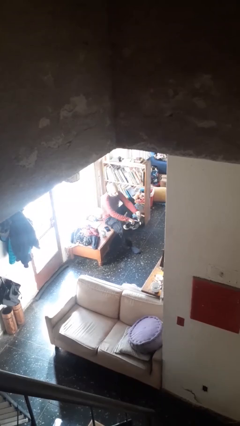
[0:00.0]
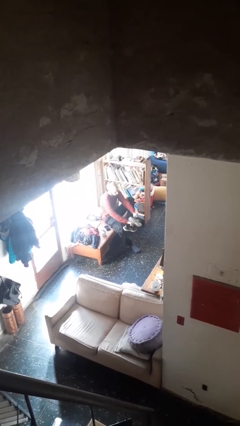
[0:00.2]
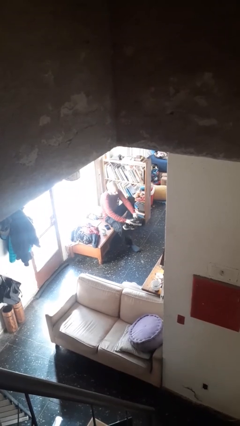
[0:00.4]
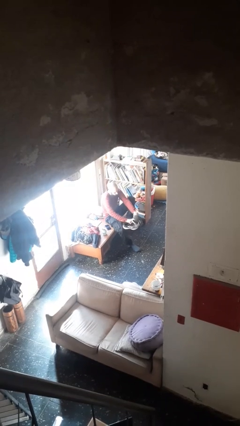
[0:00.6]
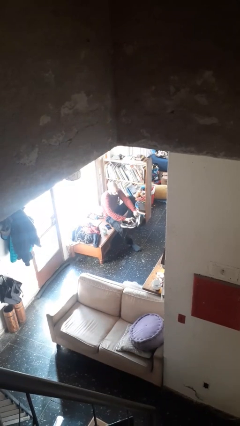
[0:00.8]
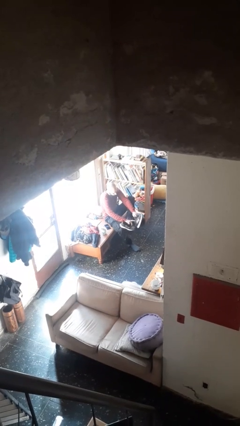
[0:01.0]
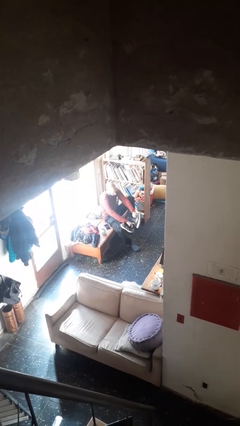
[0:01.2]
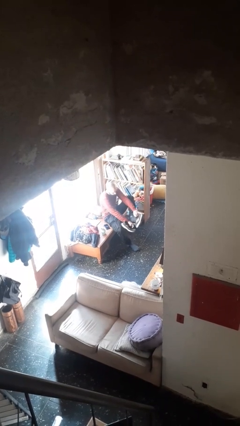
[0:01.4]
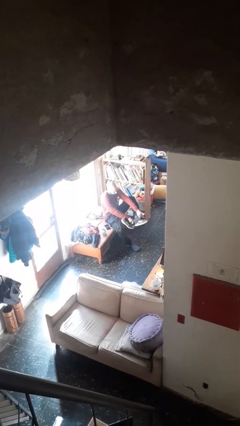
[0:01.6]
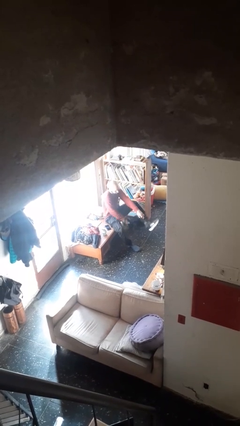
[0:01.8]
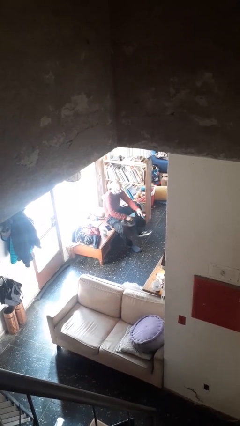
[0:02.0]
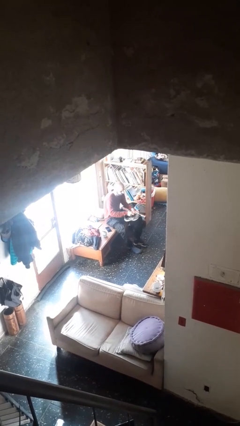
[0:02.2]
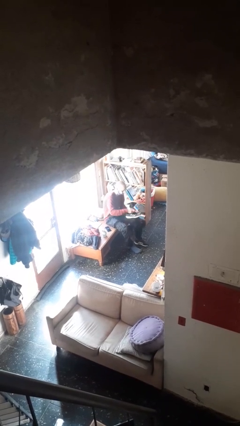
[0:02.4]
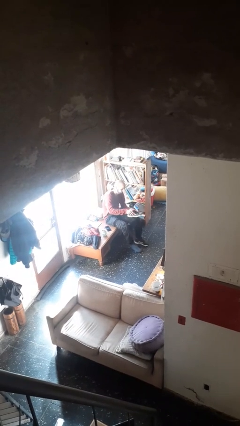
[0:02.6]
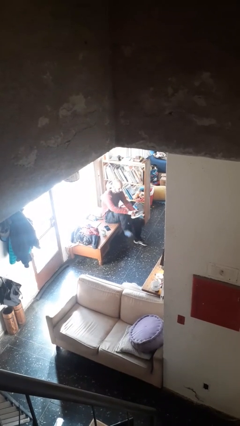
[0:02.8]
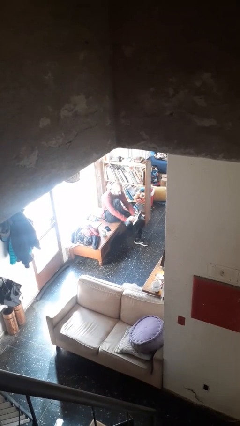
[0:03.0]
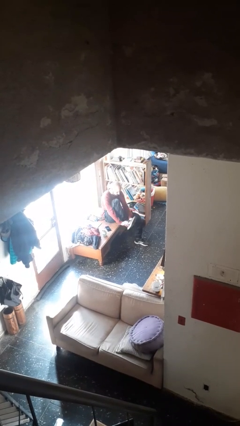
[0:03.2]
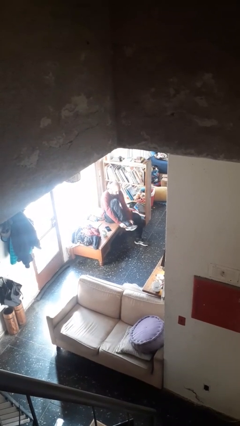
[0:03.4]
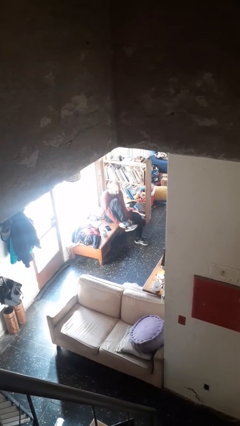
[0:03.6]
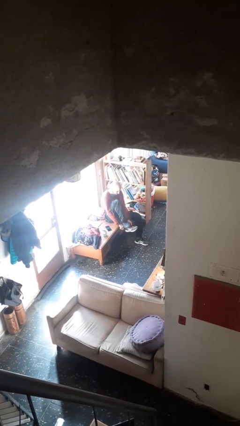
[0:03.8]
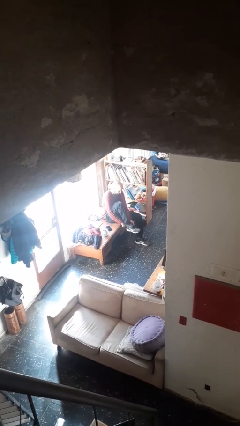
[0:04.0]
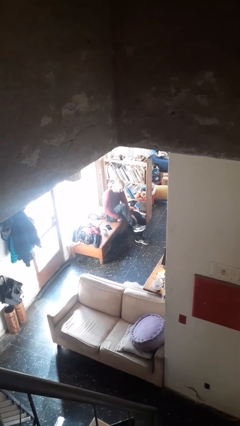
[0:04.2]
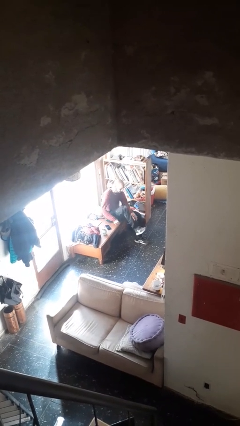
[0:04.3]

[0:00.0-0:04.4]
person puts on shoes

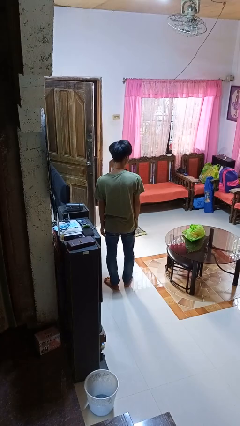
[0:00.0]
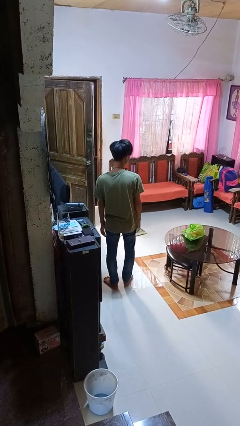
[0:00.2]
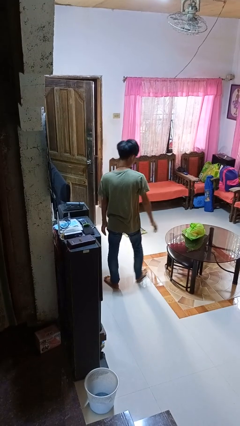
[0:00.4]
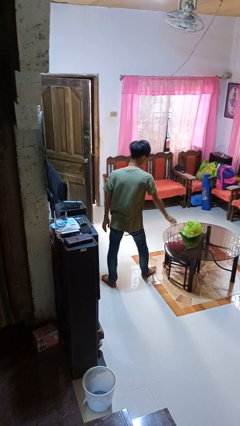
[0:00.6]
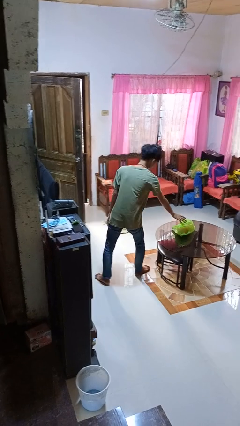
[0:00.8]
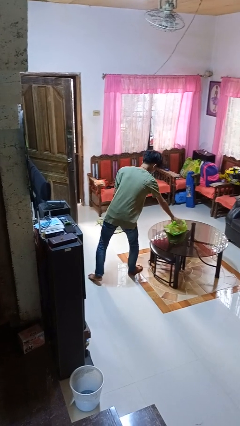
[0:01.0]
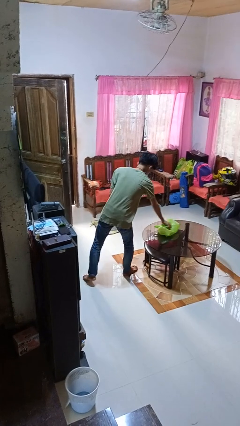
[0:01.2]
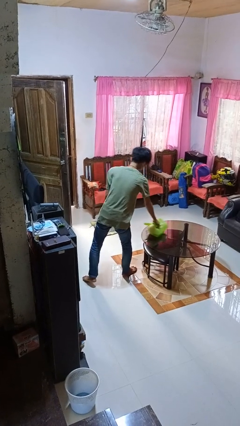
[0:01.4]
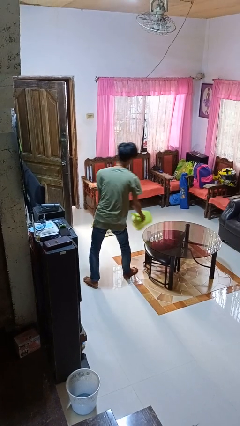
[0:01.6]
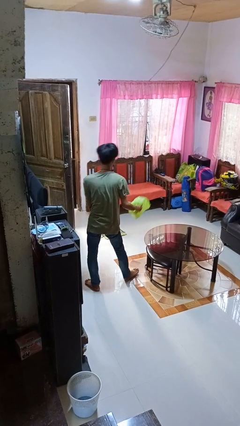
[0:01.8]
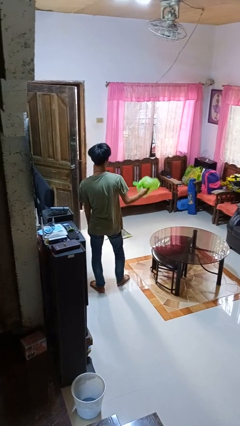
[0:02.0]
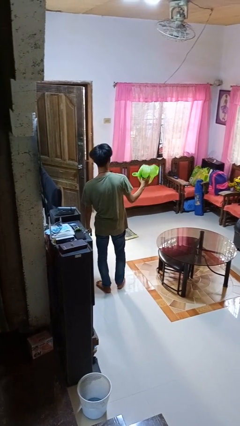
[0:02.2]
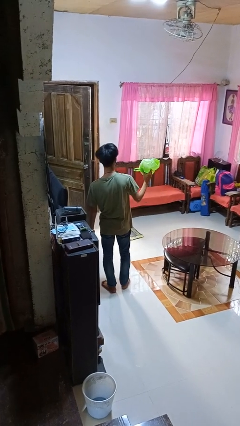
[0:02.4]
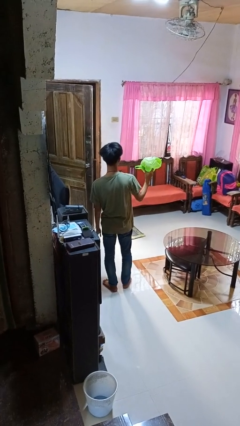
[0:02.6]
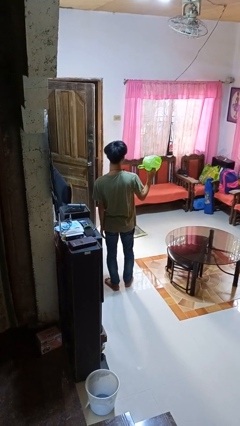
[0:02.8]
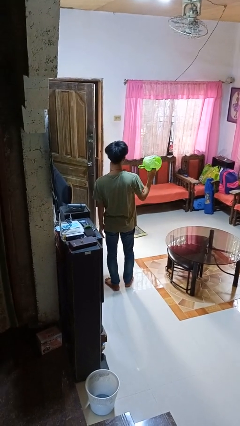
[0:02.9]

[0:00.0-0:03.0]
person picks up object from table

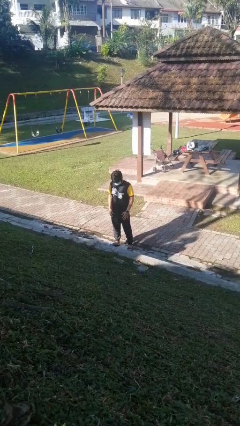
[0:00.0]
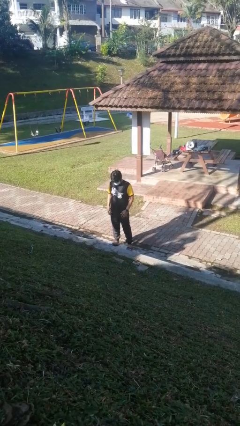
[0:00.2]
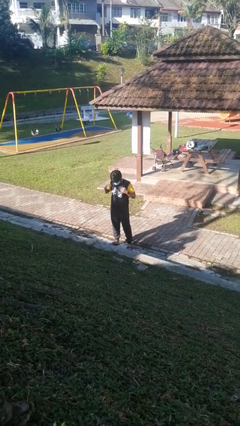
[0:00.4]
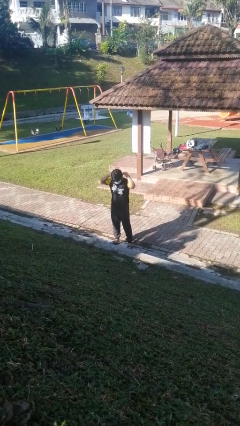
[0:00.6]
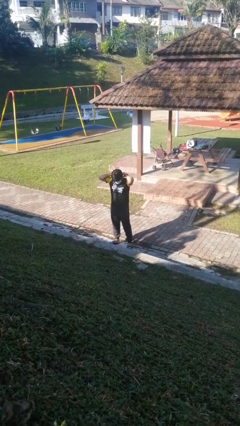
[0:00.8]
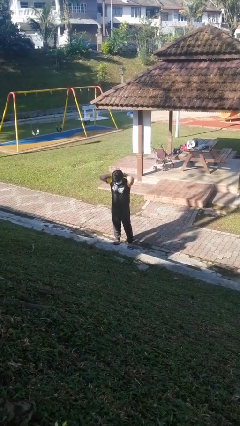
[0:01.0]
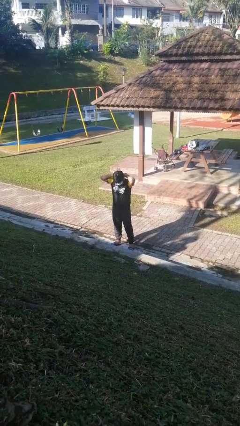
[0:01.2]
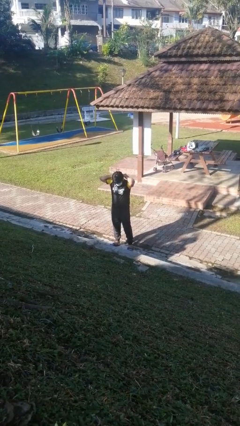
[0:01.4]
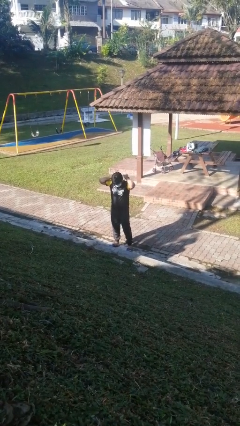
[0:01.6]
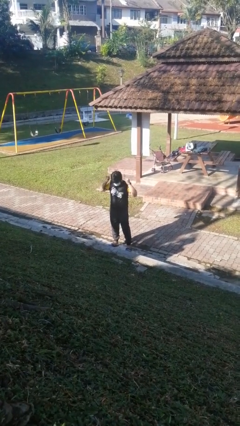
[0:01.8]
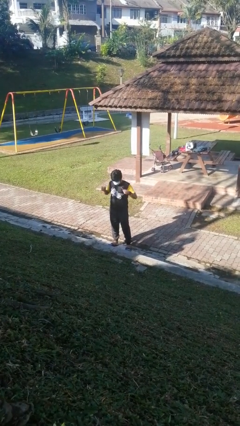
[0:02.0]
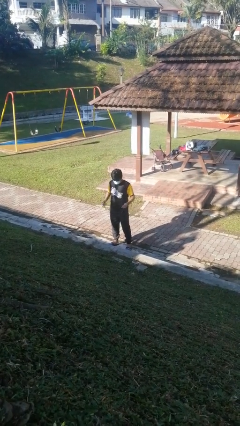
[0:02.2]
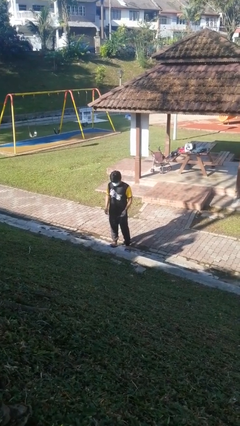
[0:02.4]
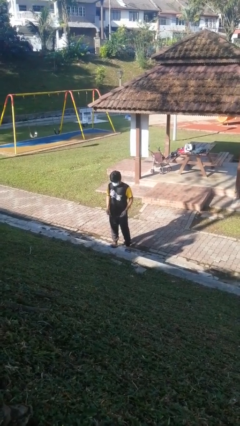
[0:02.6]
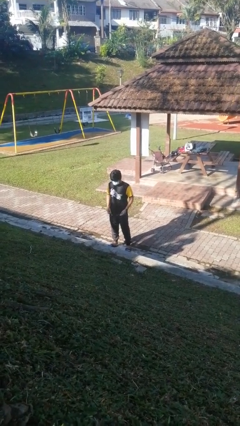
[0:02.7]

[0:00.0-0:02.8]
person takes off necklace

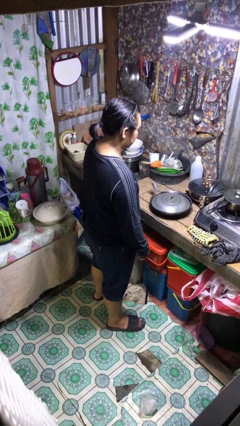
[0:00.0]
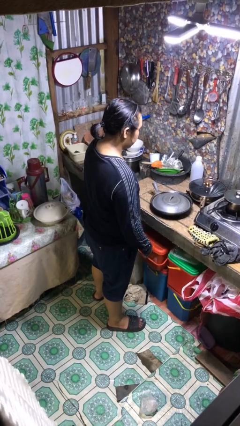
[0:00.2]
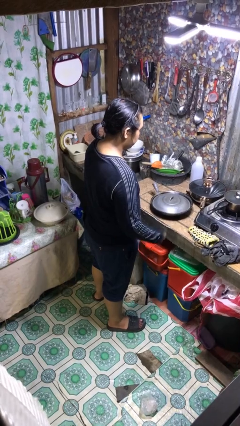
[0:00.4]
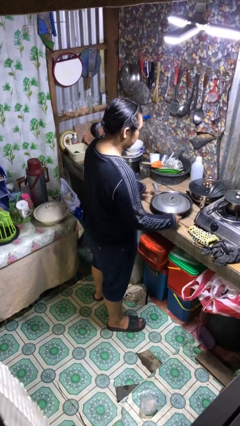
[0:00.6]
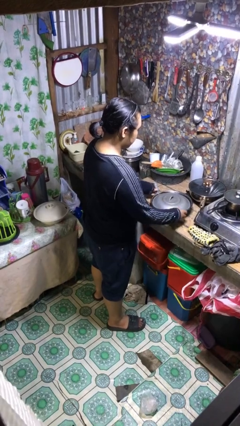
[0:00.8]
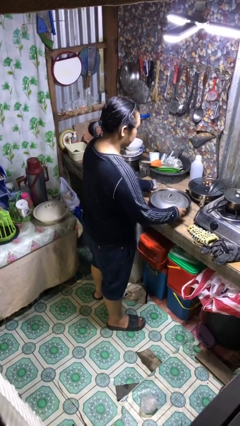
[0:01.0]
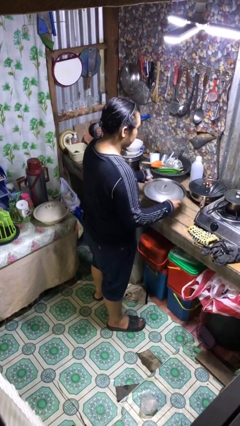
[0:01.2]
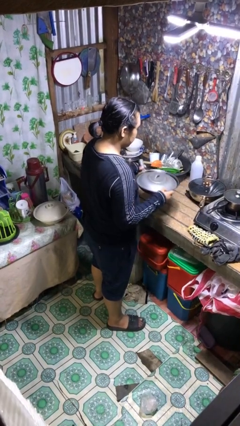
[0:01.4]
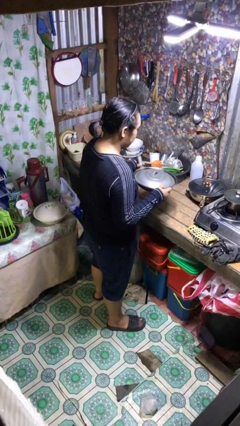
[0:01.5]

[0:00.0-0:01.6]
person picks up object from countertop

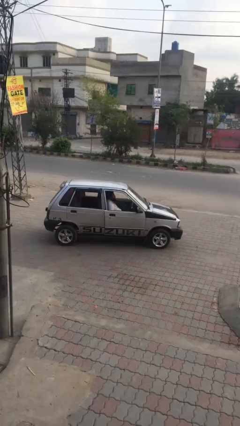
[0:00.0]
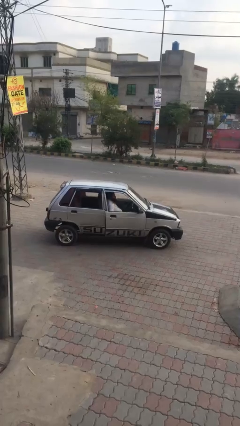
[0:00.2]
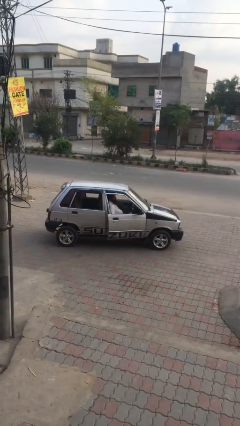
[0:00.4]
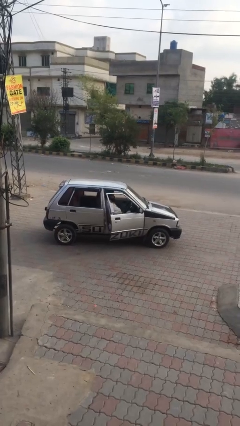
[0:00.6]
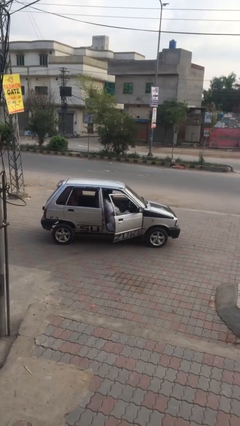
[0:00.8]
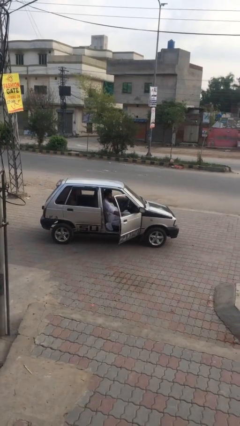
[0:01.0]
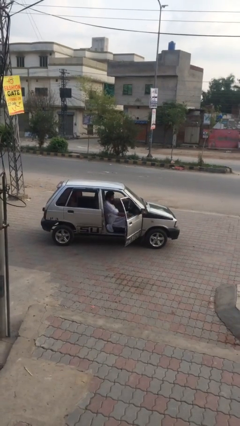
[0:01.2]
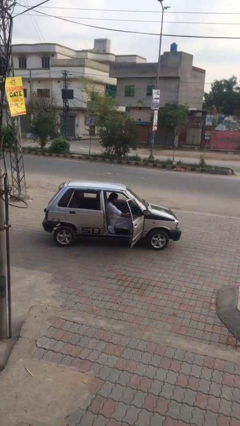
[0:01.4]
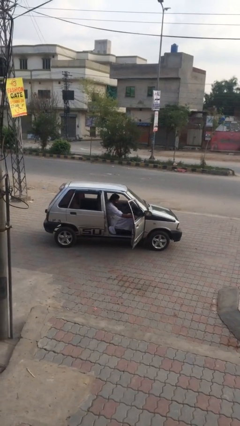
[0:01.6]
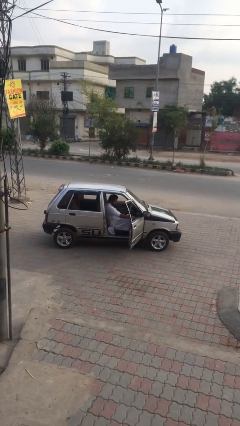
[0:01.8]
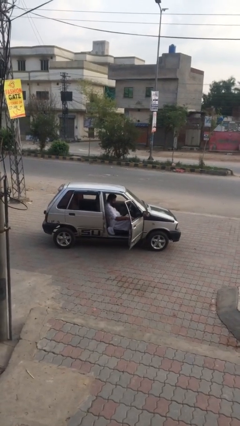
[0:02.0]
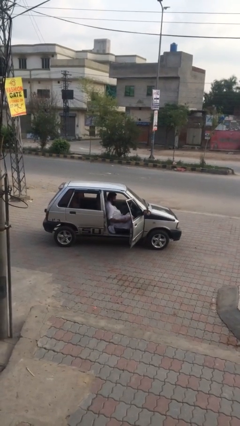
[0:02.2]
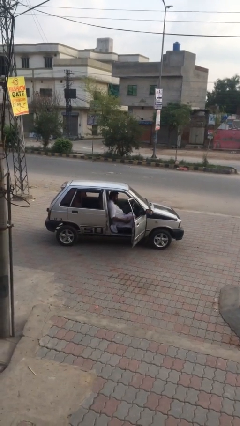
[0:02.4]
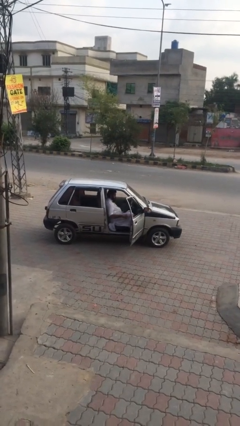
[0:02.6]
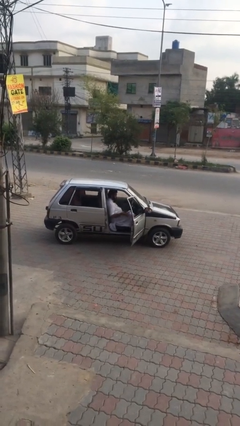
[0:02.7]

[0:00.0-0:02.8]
person opens car door

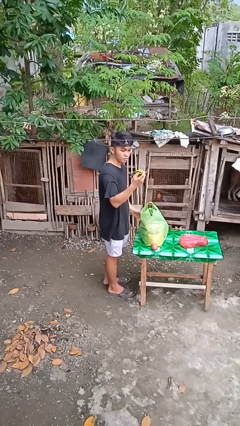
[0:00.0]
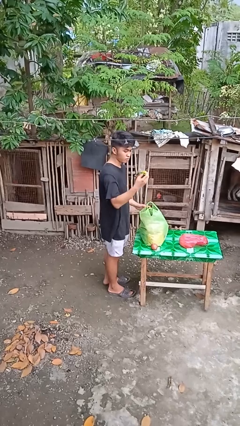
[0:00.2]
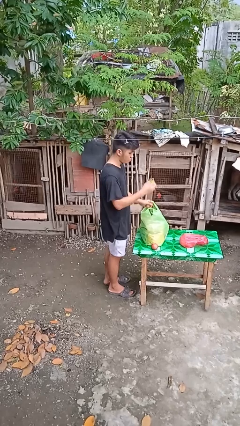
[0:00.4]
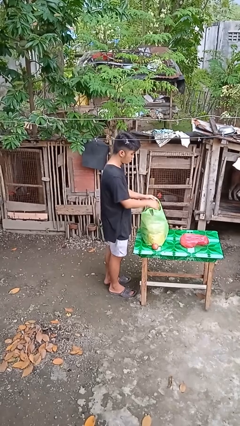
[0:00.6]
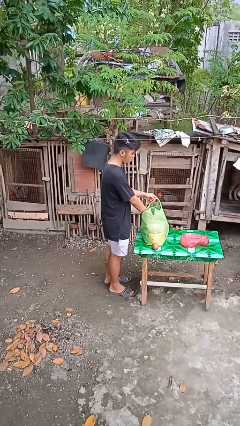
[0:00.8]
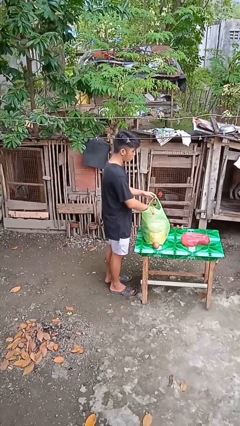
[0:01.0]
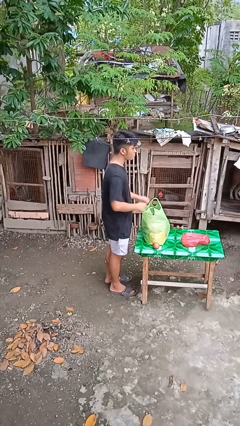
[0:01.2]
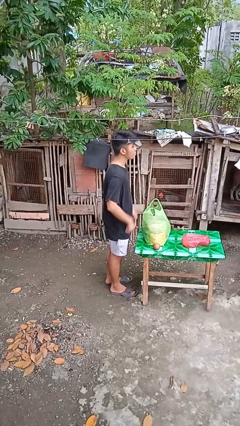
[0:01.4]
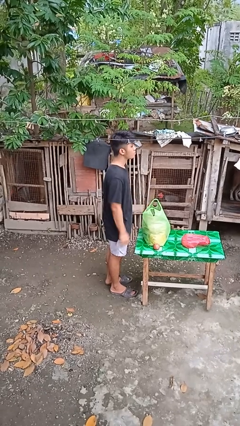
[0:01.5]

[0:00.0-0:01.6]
person puts object into bag

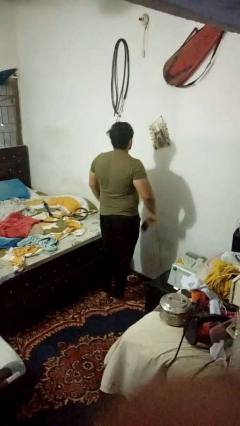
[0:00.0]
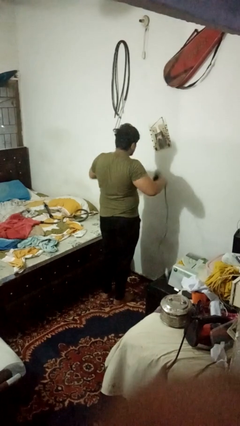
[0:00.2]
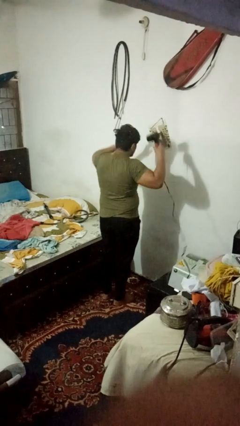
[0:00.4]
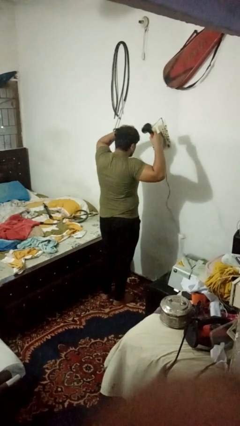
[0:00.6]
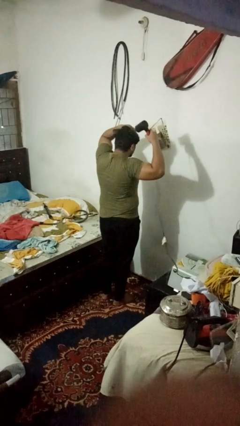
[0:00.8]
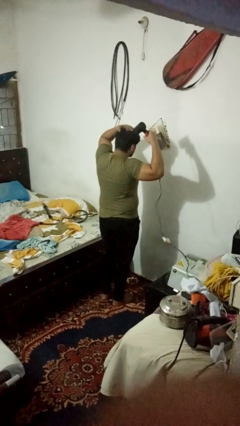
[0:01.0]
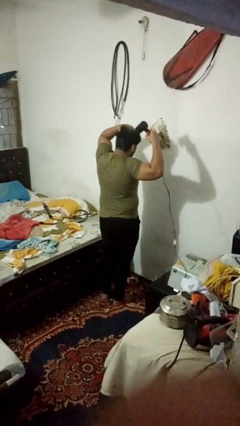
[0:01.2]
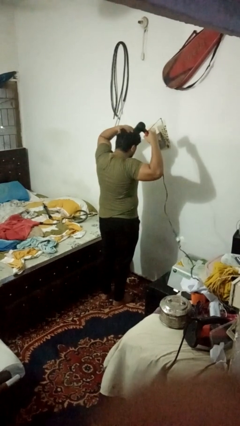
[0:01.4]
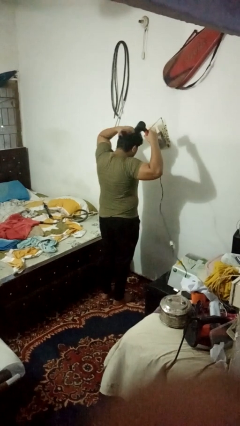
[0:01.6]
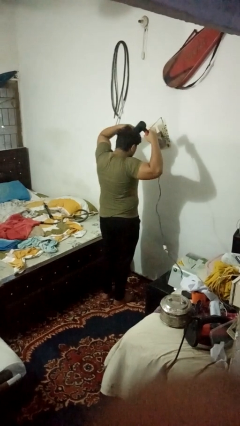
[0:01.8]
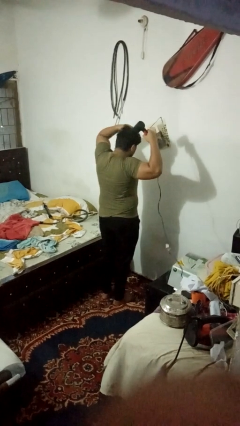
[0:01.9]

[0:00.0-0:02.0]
person dries hair with hairdryer
